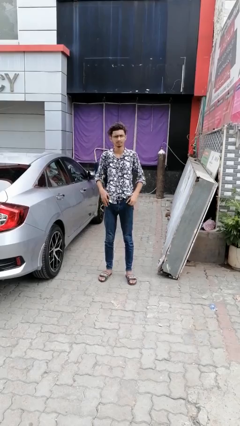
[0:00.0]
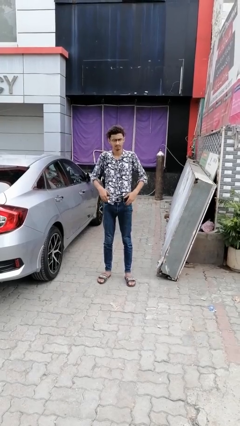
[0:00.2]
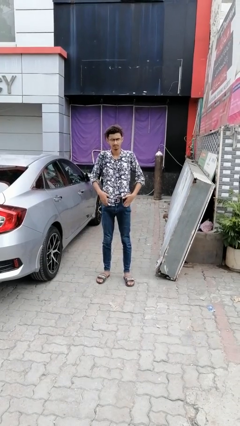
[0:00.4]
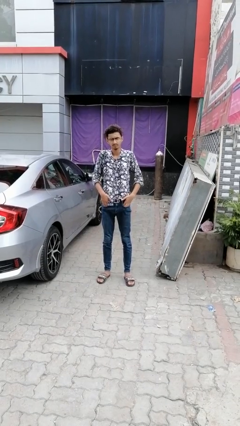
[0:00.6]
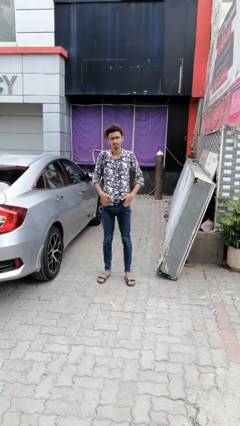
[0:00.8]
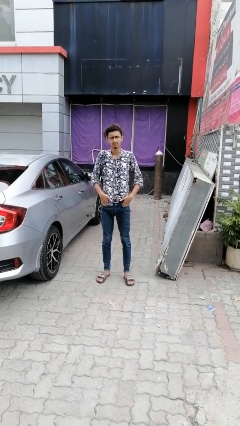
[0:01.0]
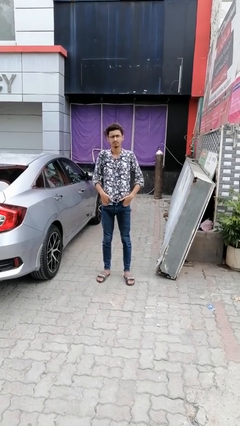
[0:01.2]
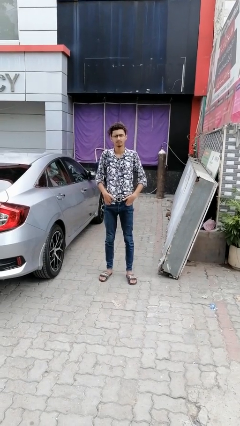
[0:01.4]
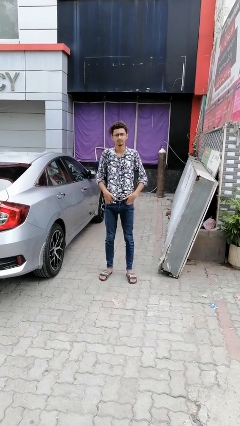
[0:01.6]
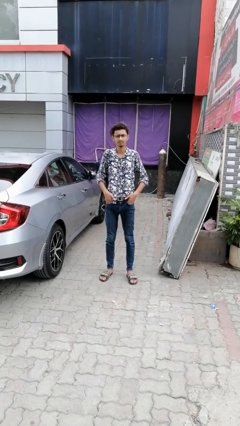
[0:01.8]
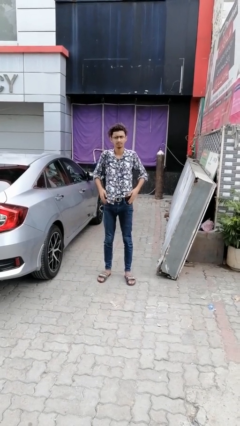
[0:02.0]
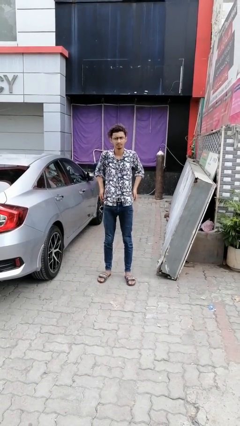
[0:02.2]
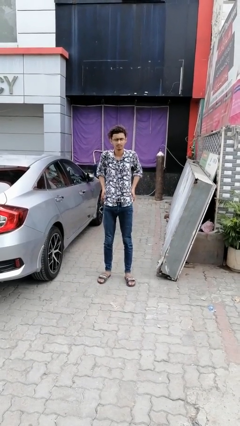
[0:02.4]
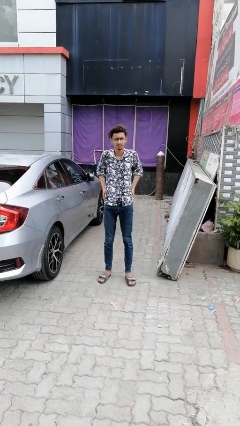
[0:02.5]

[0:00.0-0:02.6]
person puts hands in back pockets

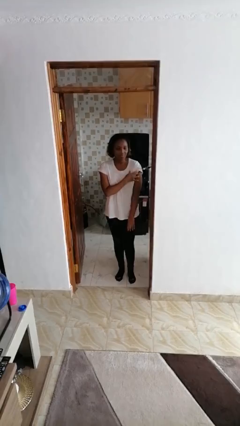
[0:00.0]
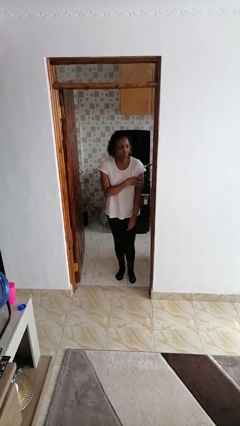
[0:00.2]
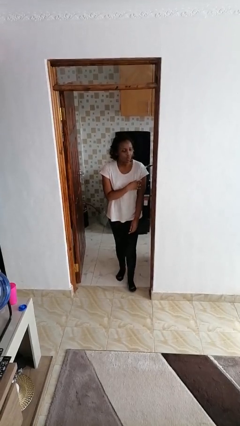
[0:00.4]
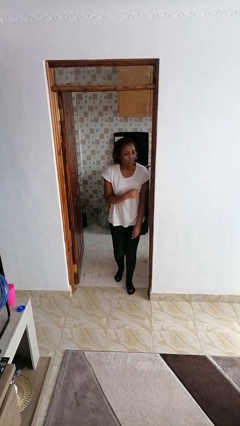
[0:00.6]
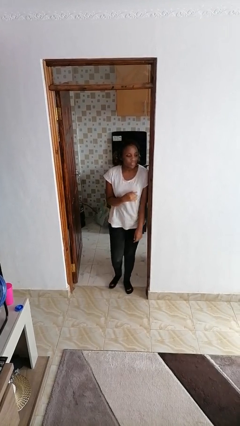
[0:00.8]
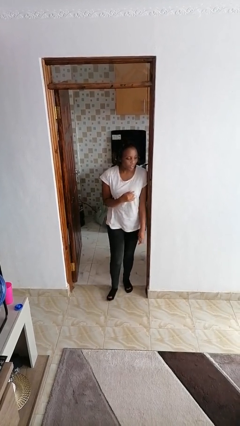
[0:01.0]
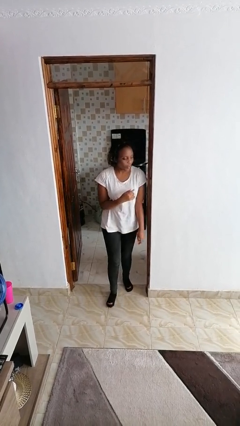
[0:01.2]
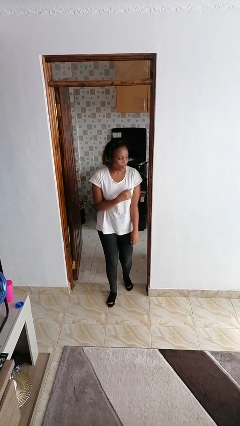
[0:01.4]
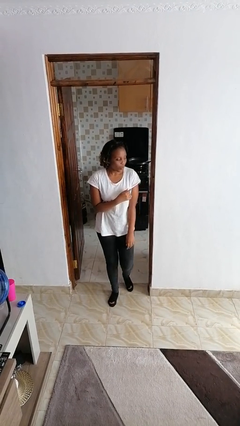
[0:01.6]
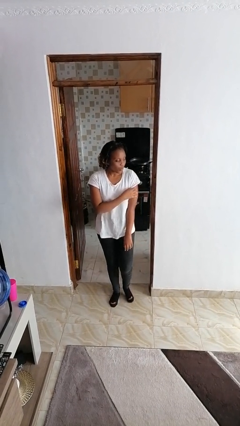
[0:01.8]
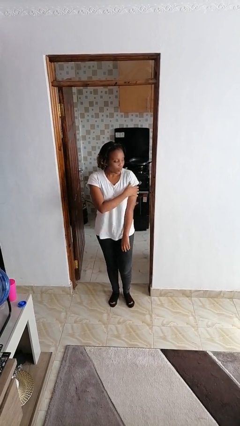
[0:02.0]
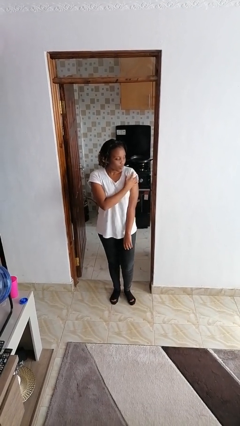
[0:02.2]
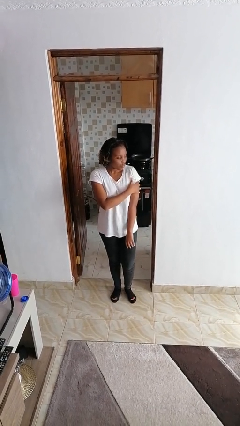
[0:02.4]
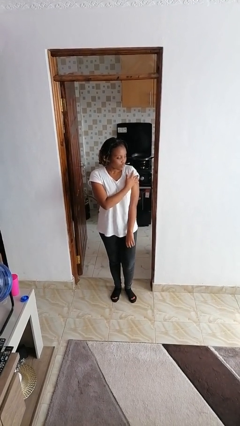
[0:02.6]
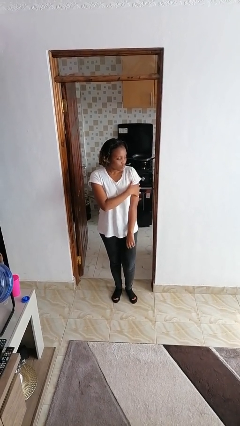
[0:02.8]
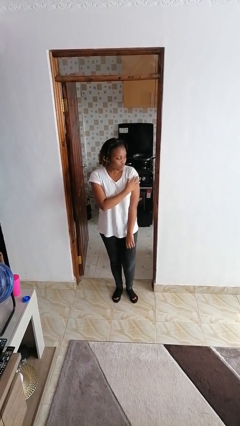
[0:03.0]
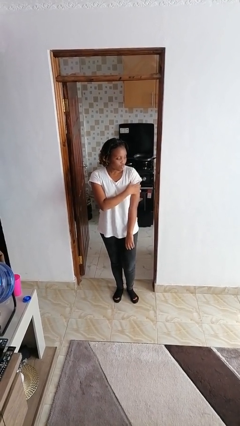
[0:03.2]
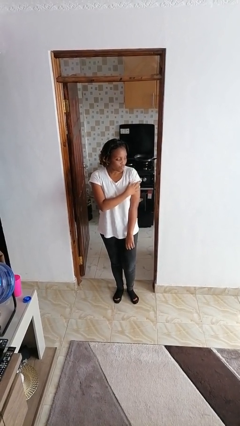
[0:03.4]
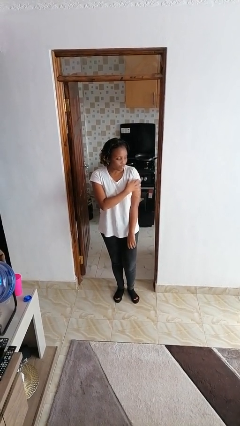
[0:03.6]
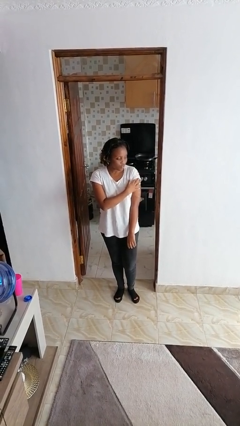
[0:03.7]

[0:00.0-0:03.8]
person bumps into wall

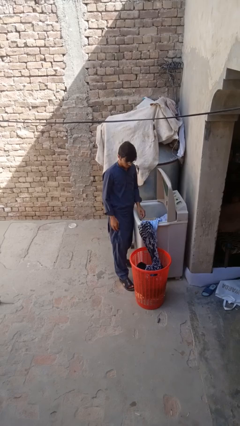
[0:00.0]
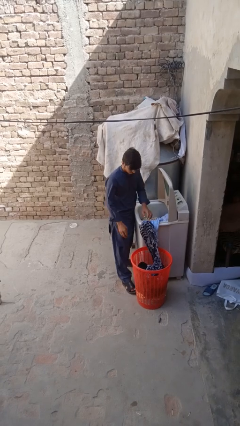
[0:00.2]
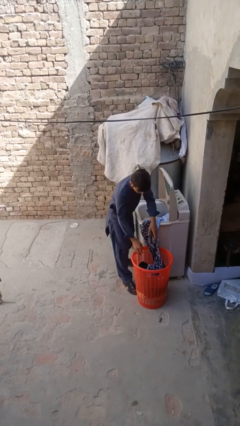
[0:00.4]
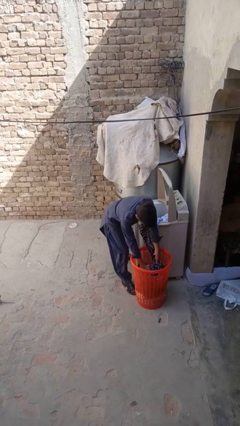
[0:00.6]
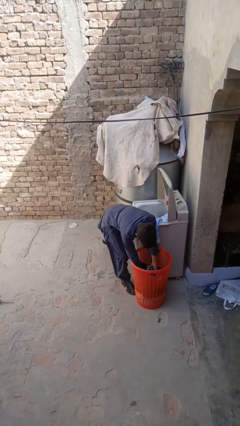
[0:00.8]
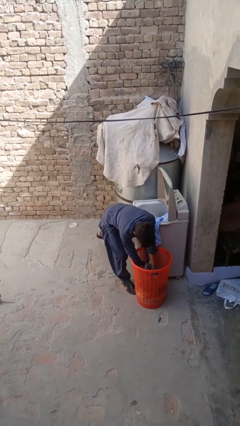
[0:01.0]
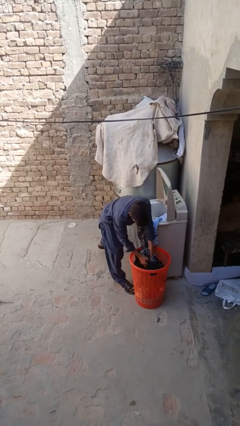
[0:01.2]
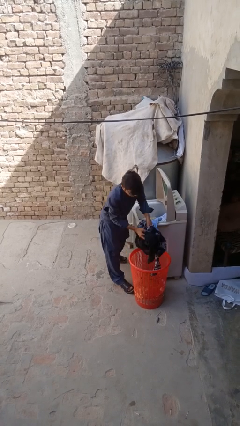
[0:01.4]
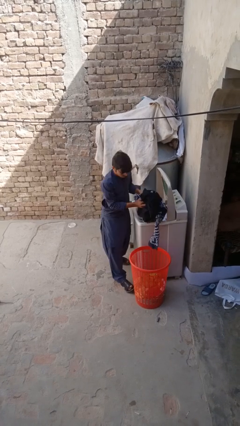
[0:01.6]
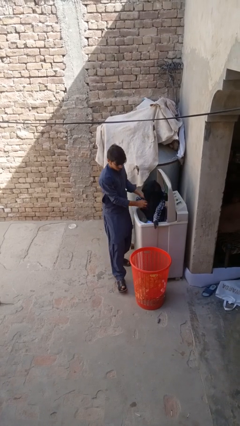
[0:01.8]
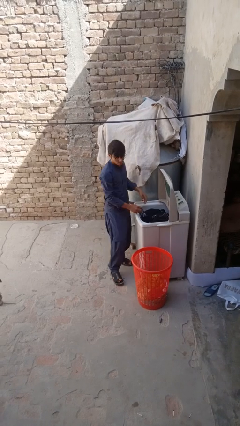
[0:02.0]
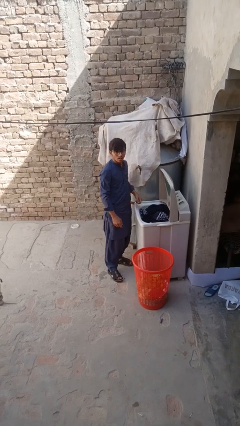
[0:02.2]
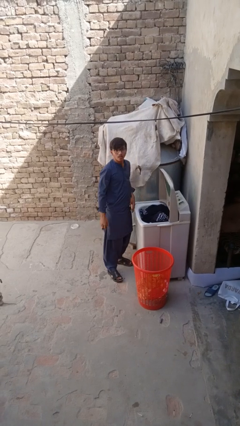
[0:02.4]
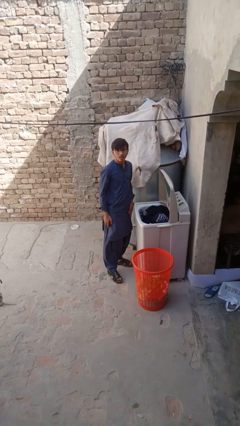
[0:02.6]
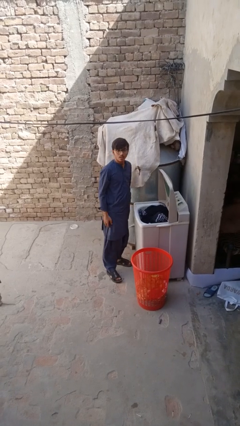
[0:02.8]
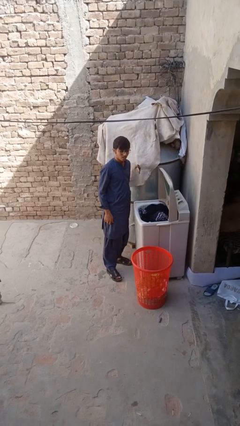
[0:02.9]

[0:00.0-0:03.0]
person loads clotheswasher

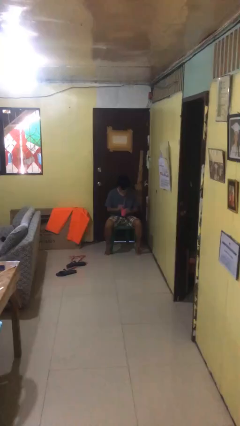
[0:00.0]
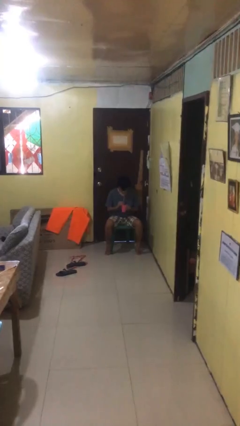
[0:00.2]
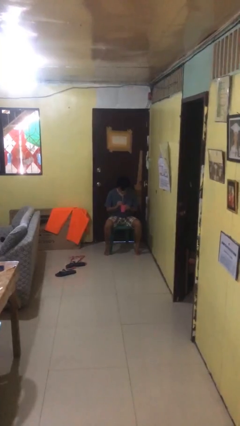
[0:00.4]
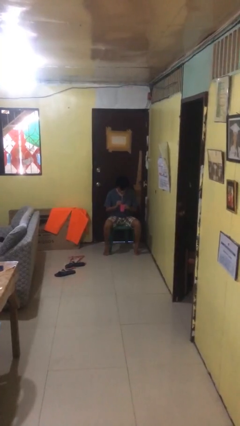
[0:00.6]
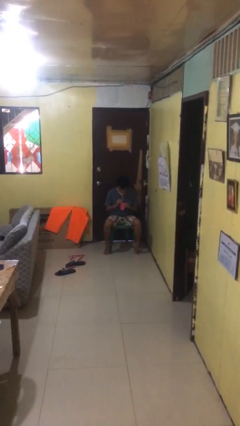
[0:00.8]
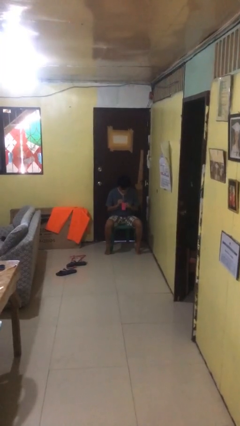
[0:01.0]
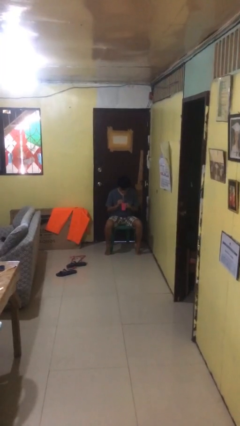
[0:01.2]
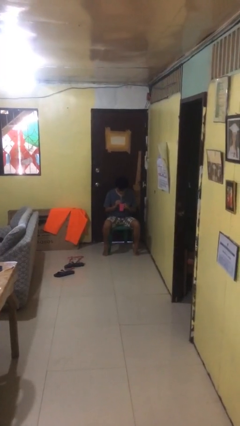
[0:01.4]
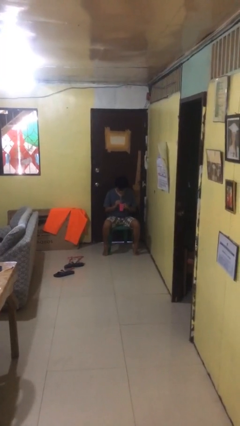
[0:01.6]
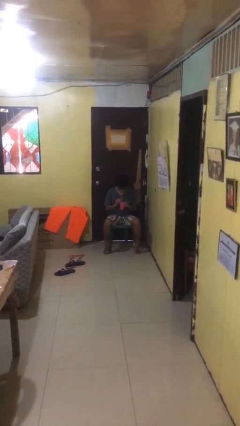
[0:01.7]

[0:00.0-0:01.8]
person drinks from straw

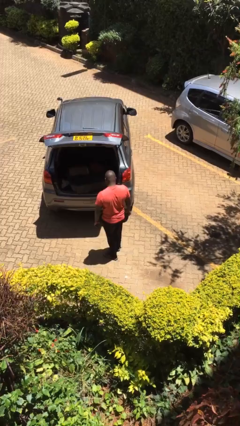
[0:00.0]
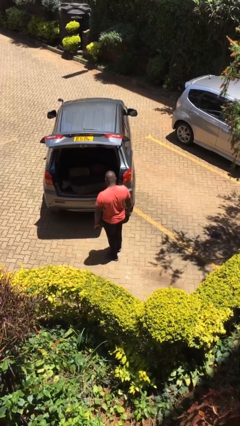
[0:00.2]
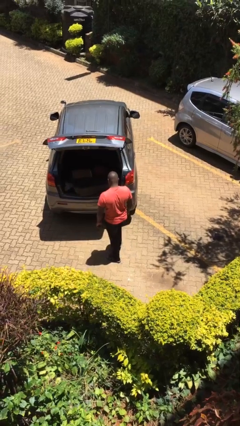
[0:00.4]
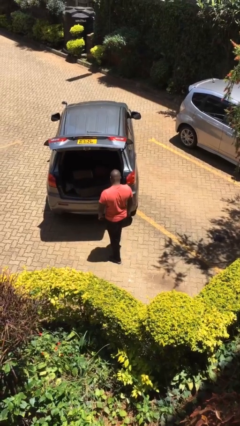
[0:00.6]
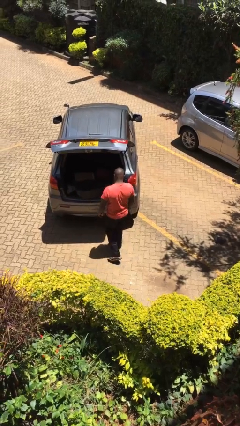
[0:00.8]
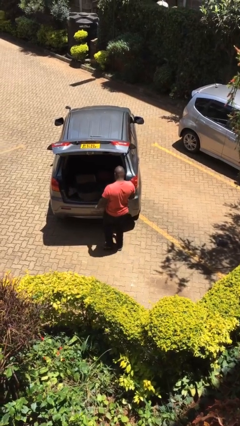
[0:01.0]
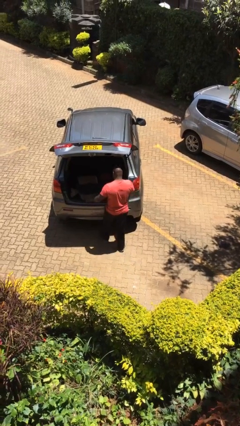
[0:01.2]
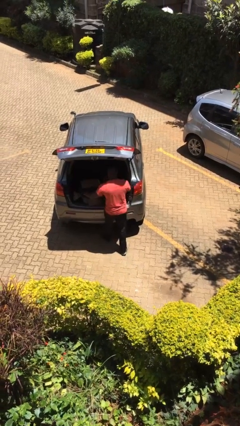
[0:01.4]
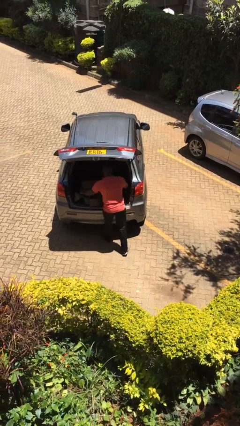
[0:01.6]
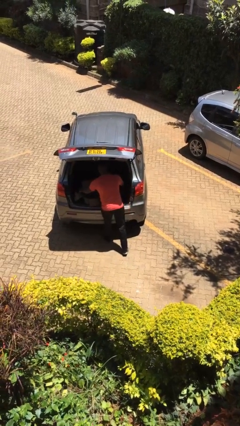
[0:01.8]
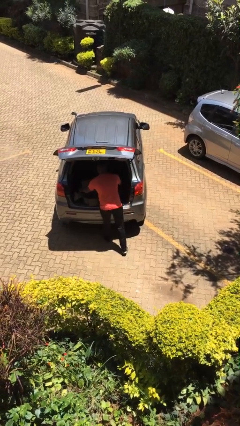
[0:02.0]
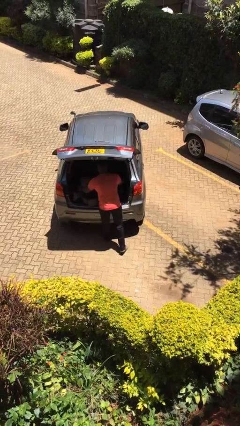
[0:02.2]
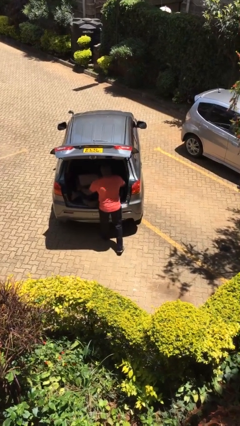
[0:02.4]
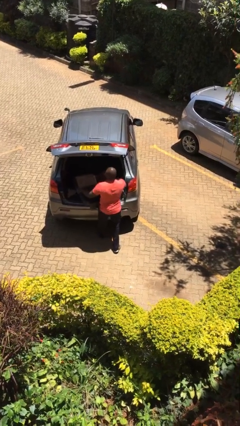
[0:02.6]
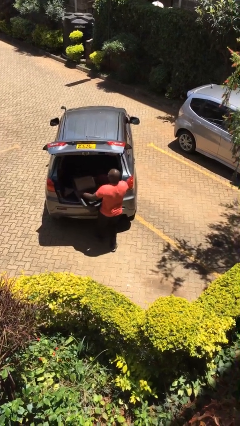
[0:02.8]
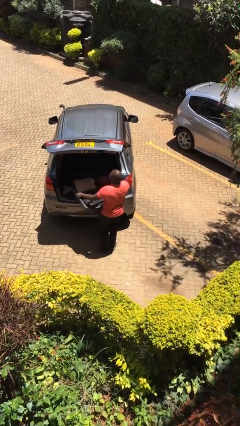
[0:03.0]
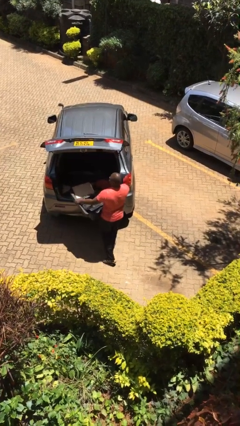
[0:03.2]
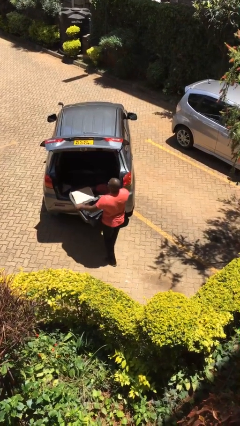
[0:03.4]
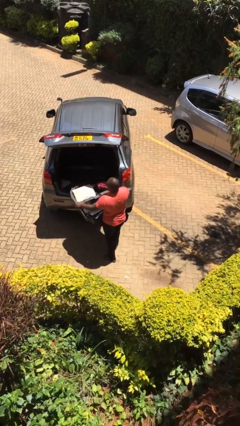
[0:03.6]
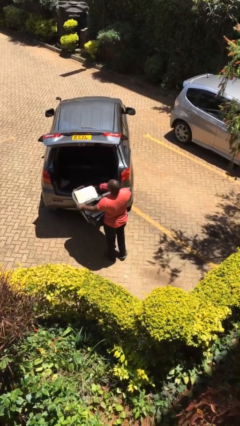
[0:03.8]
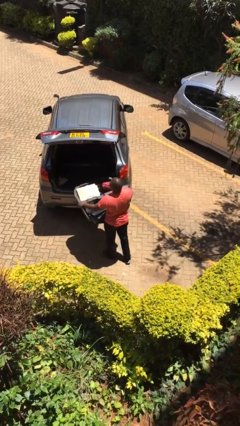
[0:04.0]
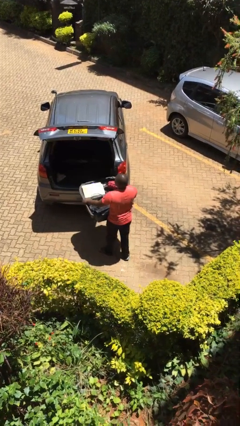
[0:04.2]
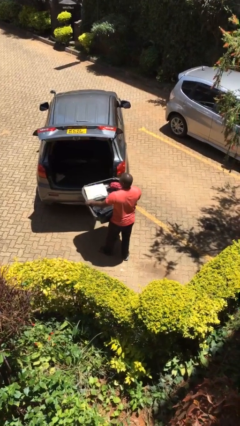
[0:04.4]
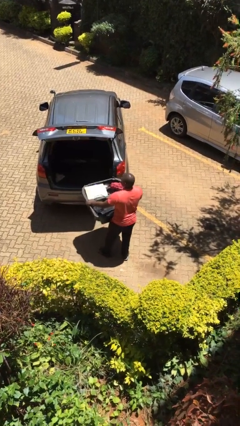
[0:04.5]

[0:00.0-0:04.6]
person unloads car

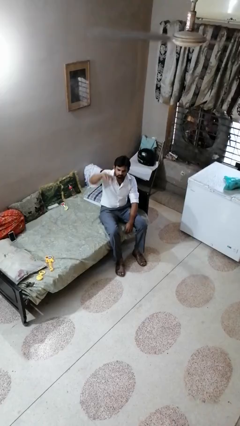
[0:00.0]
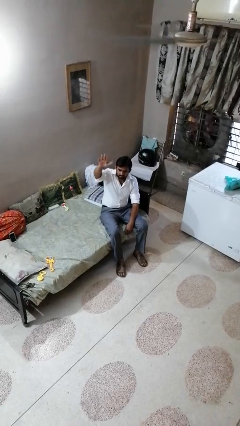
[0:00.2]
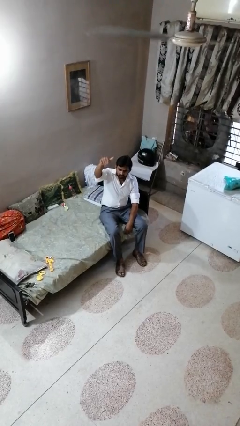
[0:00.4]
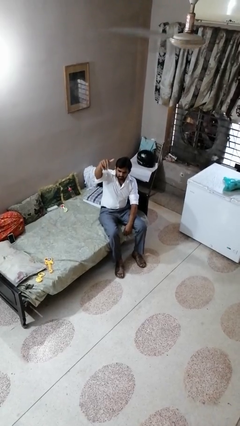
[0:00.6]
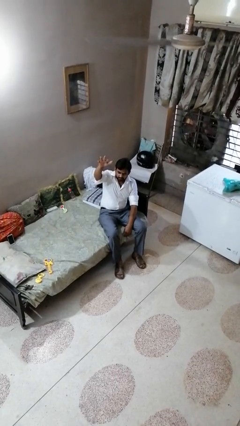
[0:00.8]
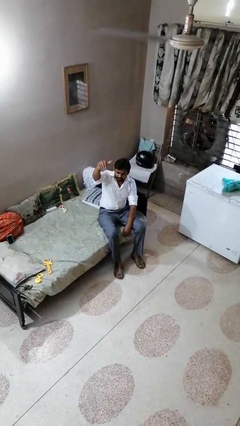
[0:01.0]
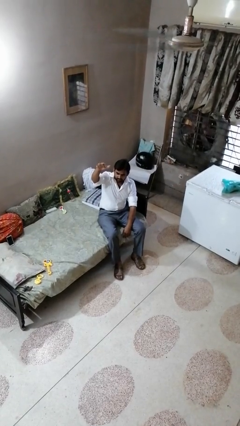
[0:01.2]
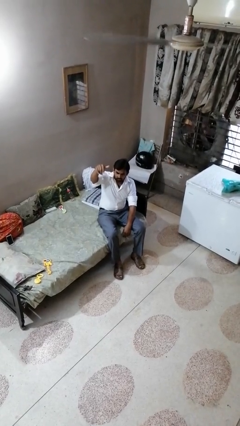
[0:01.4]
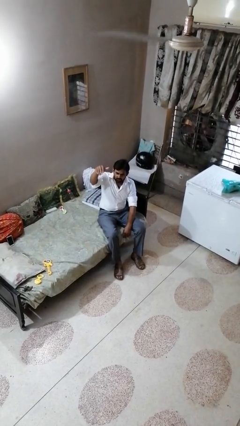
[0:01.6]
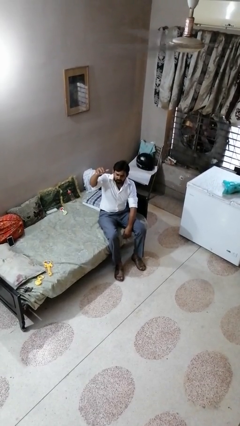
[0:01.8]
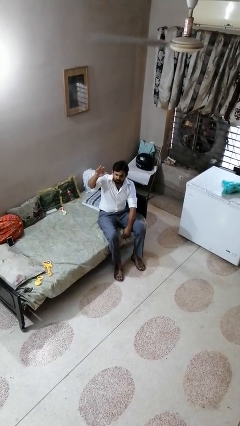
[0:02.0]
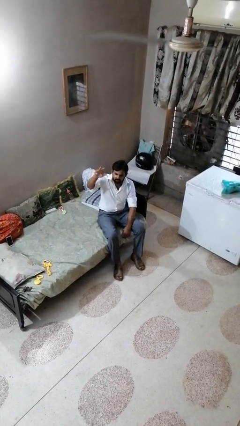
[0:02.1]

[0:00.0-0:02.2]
person gestures come here
